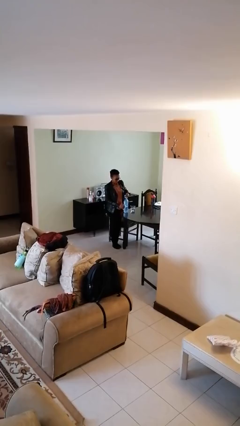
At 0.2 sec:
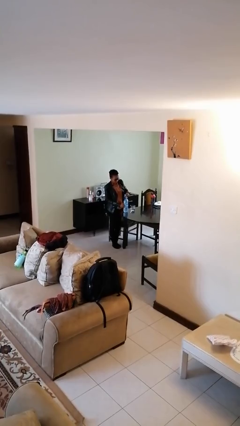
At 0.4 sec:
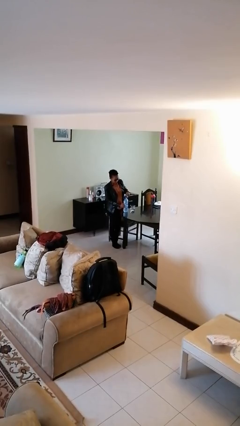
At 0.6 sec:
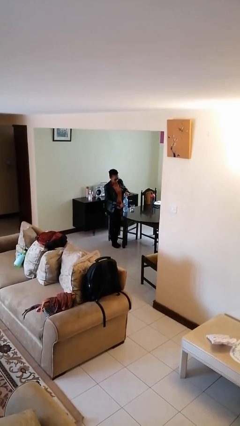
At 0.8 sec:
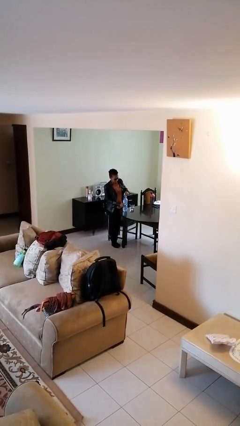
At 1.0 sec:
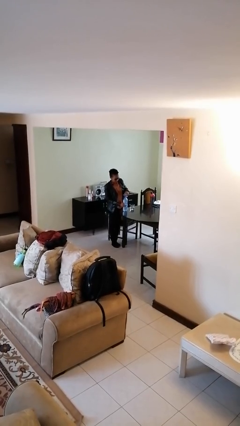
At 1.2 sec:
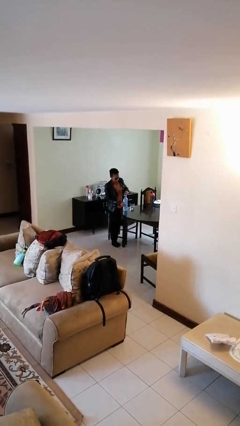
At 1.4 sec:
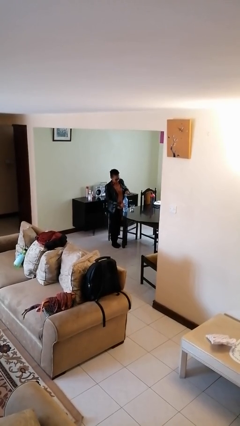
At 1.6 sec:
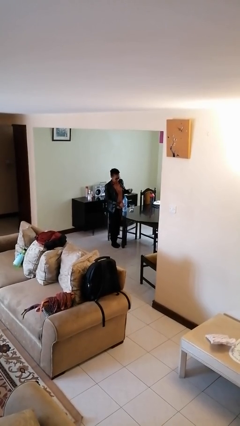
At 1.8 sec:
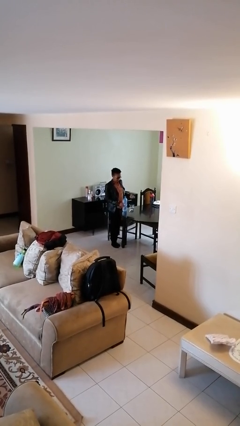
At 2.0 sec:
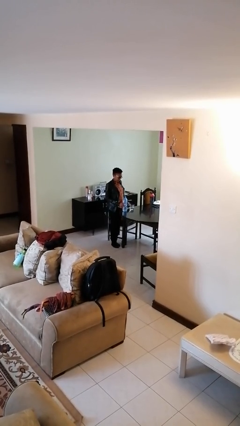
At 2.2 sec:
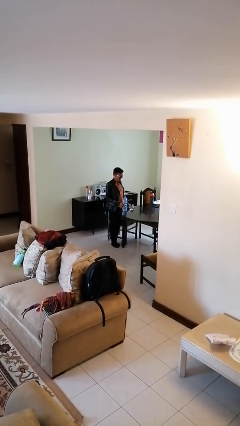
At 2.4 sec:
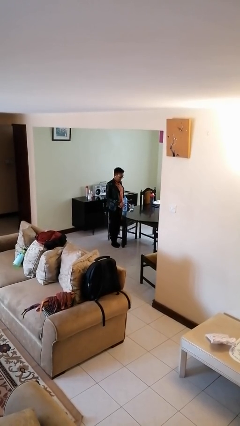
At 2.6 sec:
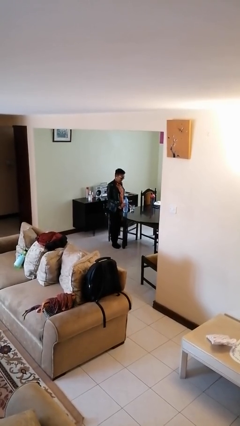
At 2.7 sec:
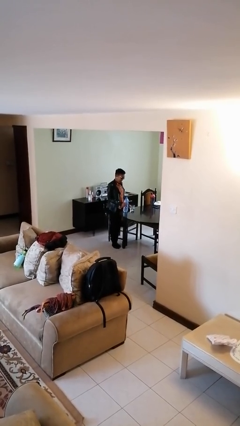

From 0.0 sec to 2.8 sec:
person unscrews lid from bottle

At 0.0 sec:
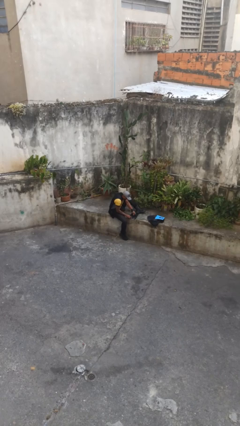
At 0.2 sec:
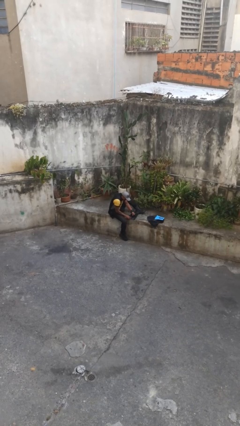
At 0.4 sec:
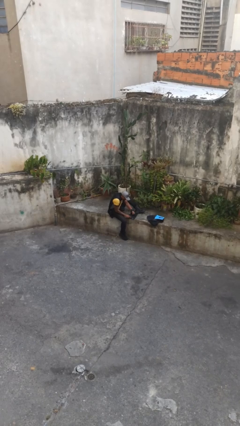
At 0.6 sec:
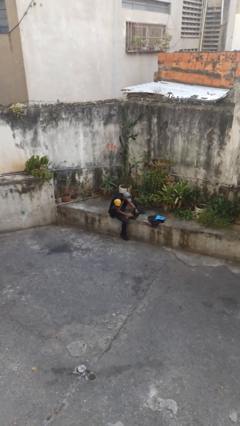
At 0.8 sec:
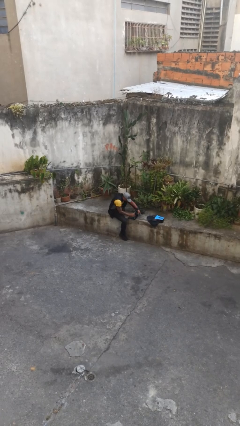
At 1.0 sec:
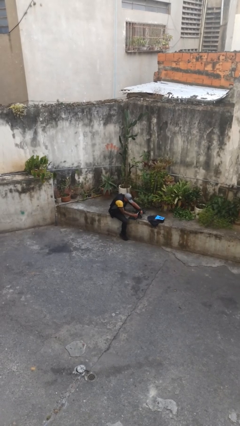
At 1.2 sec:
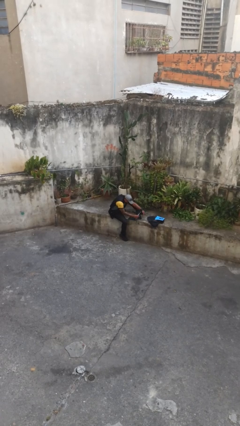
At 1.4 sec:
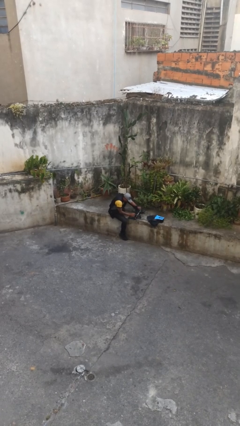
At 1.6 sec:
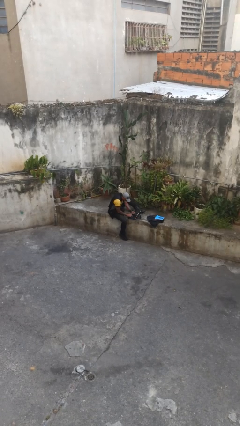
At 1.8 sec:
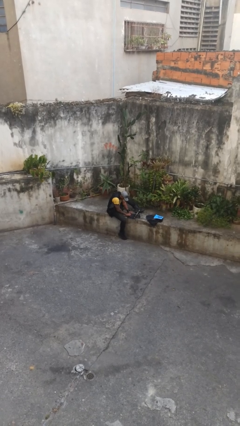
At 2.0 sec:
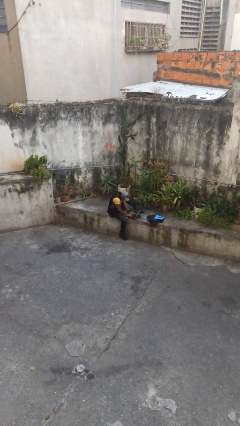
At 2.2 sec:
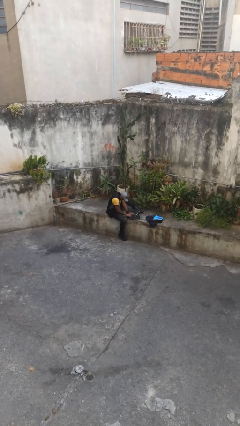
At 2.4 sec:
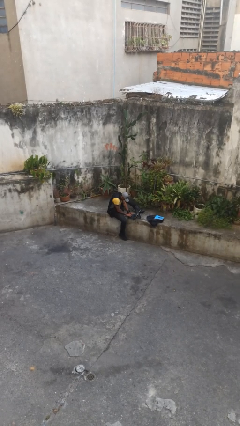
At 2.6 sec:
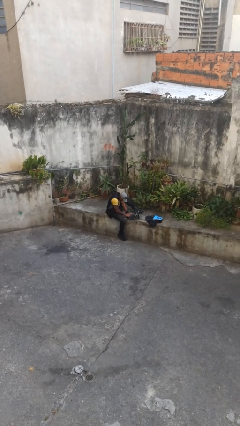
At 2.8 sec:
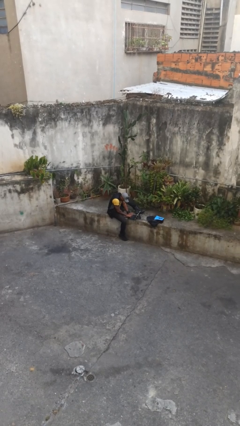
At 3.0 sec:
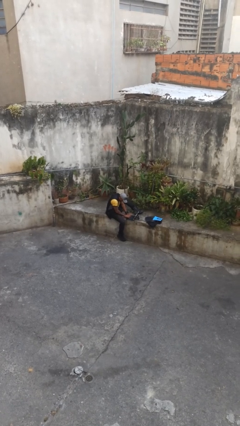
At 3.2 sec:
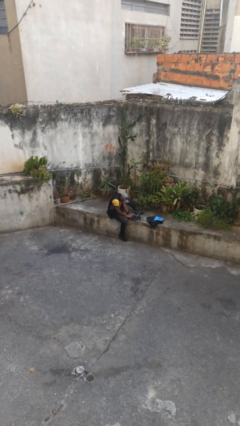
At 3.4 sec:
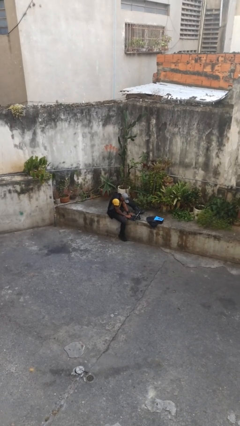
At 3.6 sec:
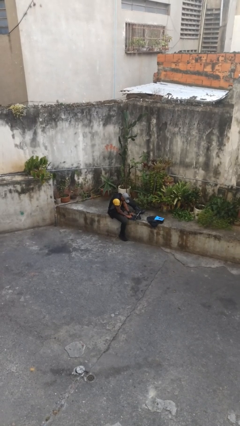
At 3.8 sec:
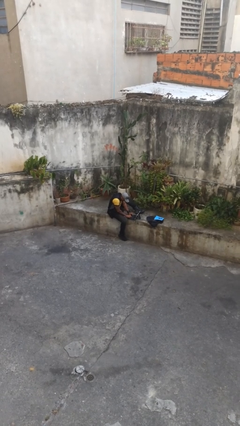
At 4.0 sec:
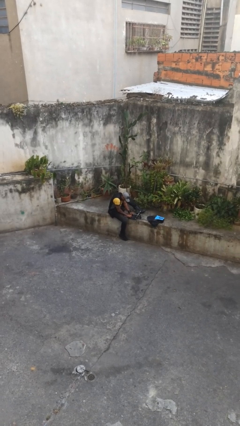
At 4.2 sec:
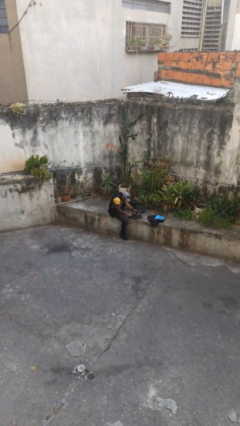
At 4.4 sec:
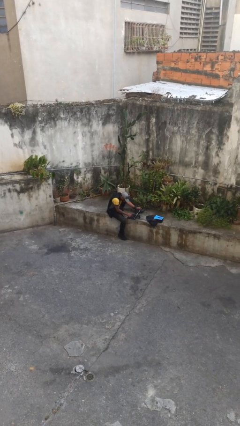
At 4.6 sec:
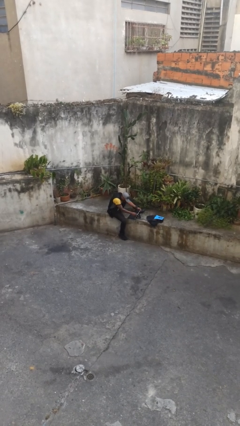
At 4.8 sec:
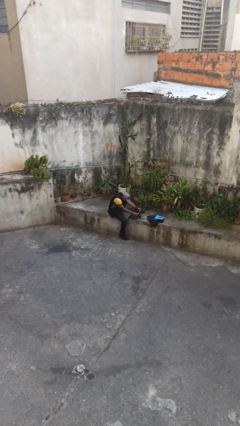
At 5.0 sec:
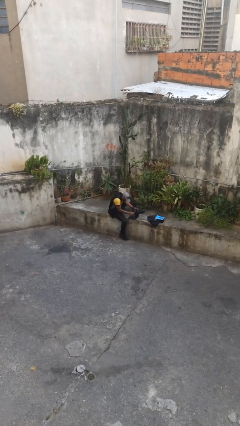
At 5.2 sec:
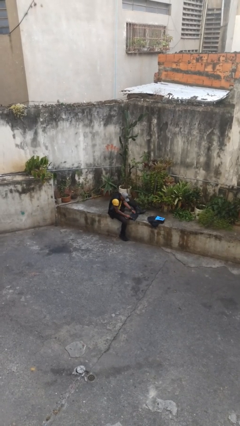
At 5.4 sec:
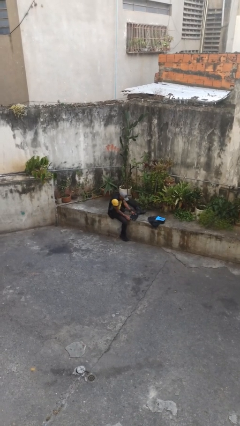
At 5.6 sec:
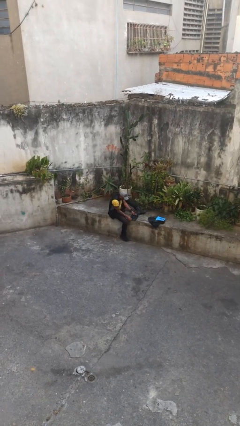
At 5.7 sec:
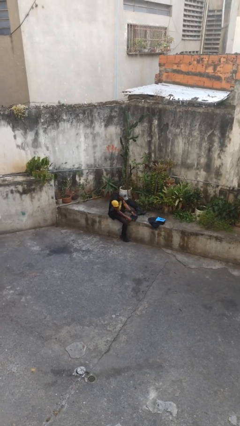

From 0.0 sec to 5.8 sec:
person interacts with laptop

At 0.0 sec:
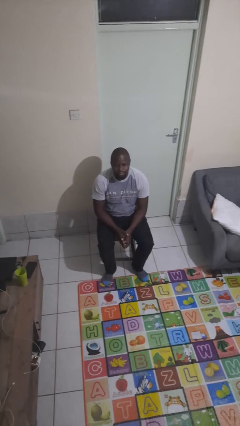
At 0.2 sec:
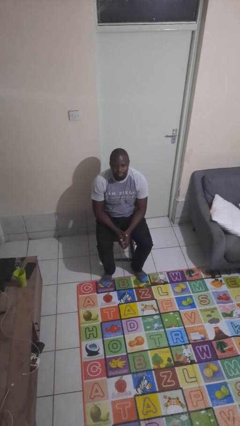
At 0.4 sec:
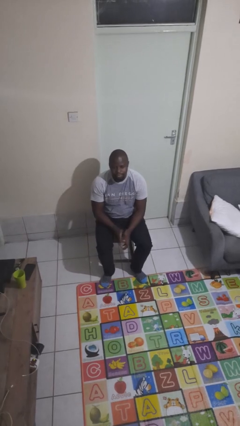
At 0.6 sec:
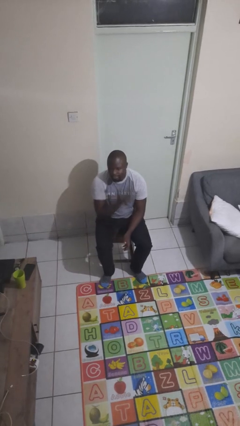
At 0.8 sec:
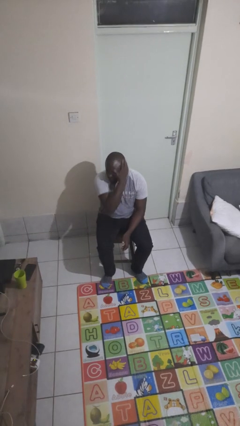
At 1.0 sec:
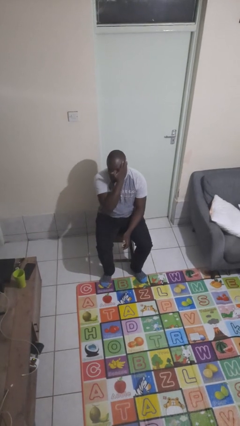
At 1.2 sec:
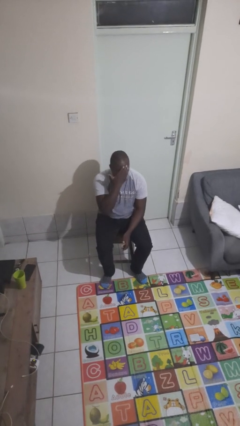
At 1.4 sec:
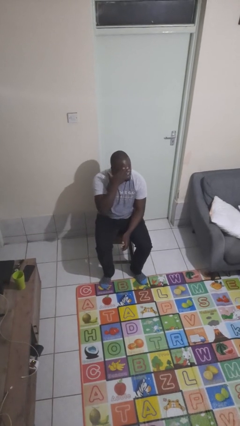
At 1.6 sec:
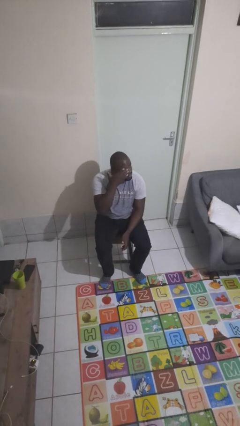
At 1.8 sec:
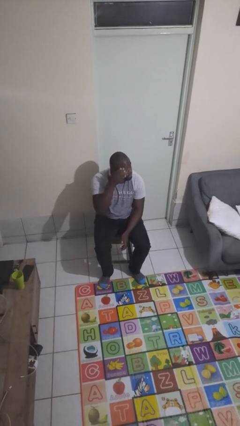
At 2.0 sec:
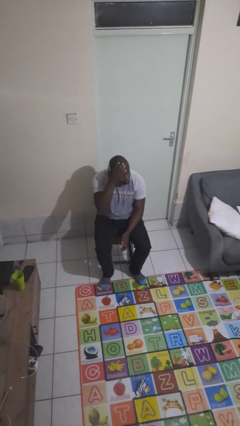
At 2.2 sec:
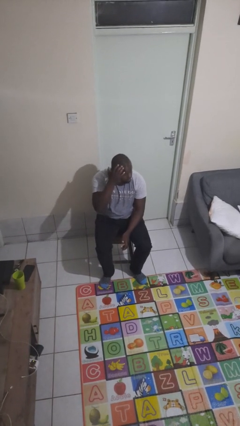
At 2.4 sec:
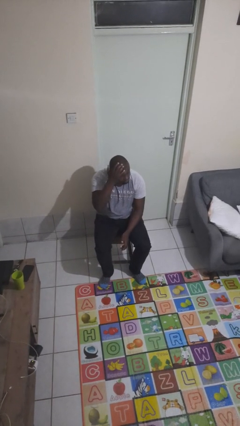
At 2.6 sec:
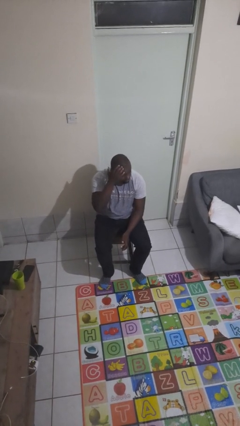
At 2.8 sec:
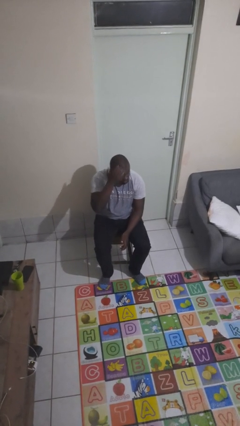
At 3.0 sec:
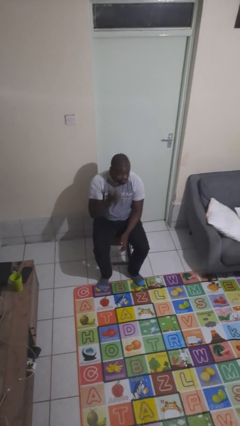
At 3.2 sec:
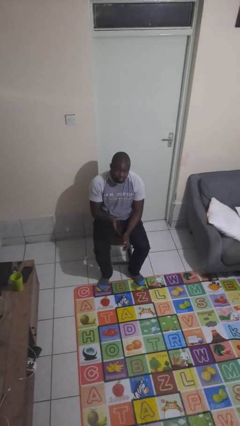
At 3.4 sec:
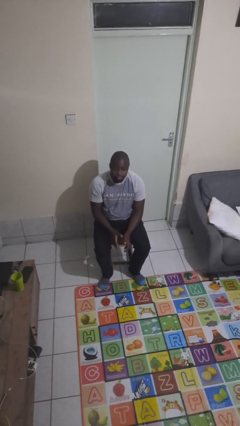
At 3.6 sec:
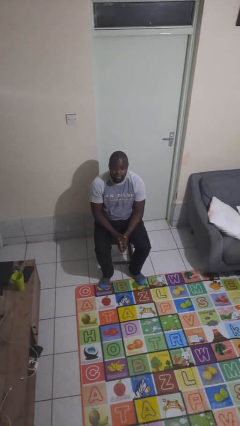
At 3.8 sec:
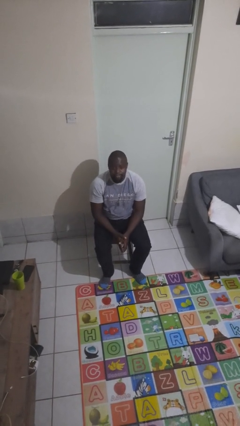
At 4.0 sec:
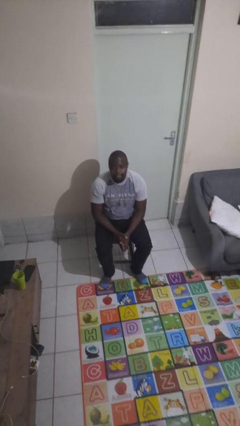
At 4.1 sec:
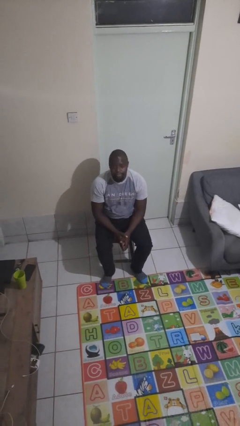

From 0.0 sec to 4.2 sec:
person scratches face

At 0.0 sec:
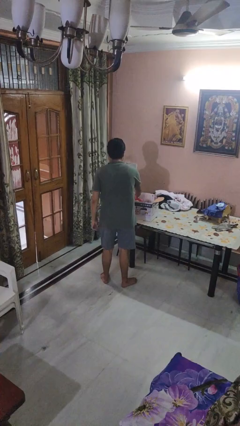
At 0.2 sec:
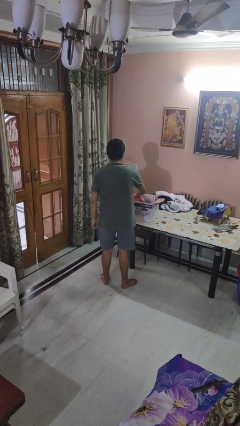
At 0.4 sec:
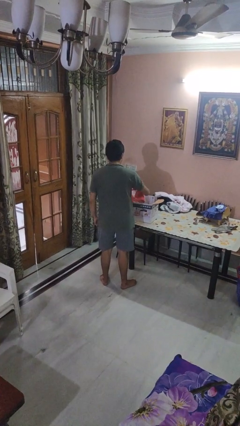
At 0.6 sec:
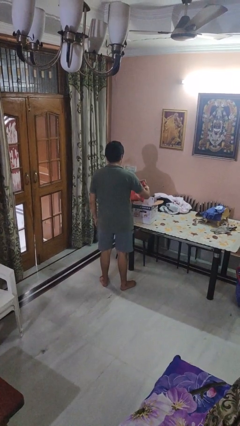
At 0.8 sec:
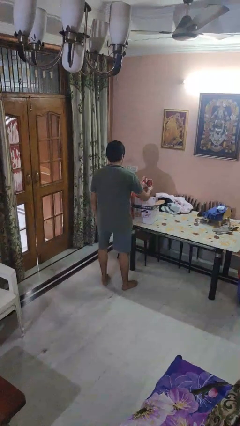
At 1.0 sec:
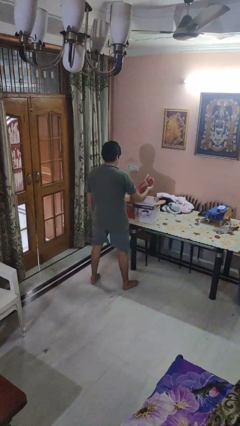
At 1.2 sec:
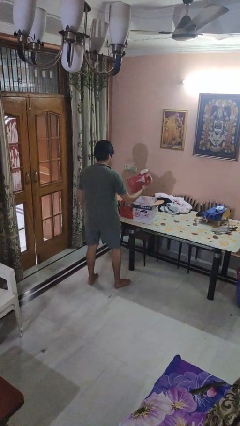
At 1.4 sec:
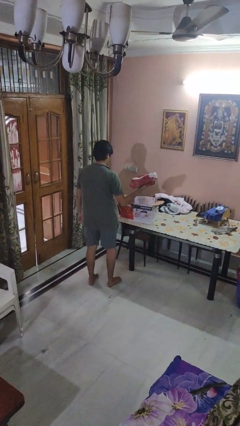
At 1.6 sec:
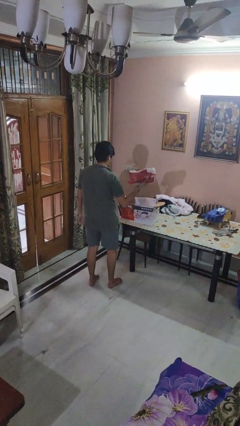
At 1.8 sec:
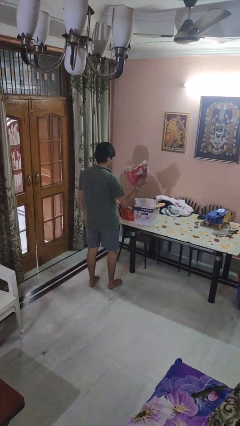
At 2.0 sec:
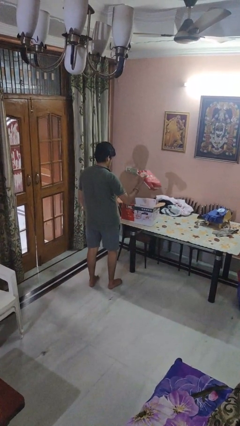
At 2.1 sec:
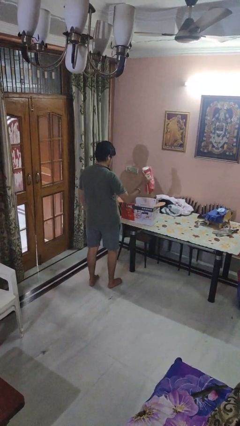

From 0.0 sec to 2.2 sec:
person takes object from box

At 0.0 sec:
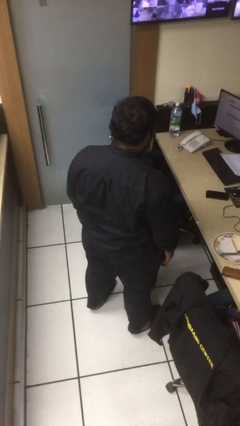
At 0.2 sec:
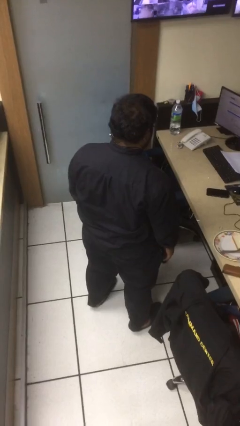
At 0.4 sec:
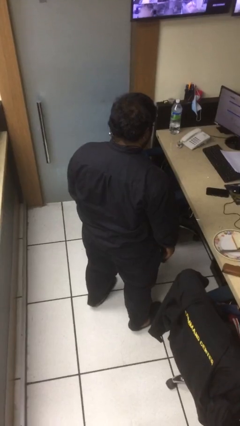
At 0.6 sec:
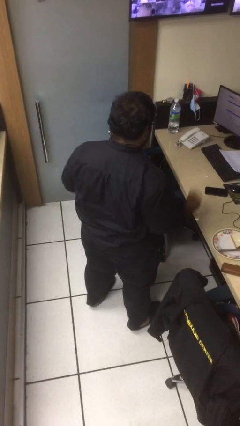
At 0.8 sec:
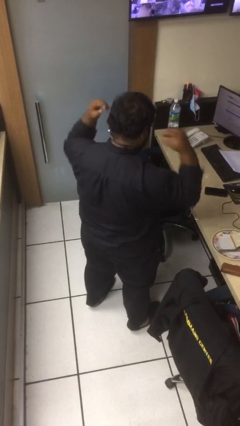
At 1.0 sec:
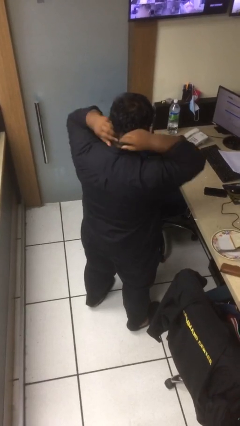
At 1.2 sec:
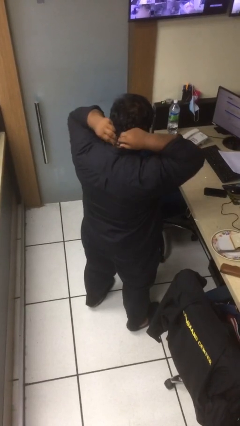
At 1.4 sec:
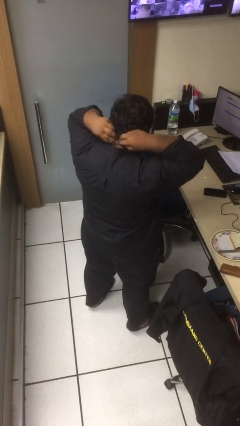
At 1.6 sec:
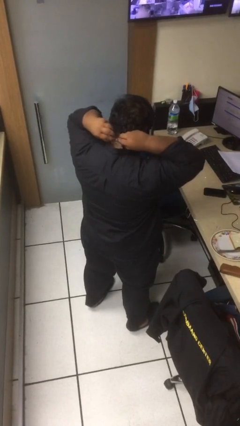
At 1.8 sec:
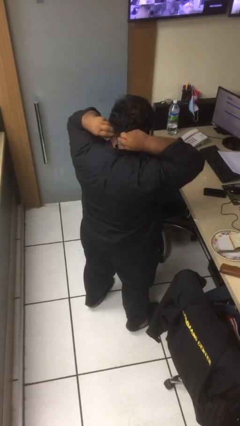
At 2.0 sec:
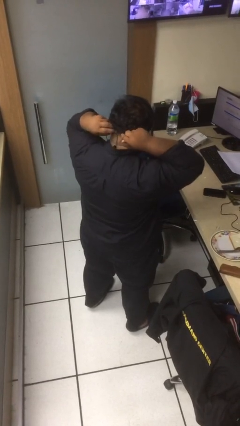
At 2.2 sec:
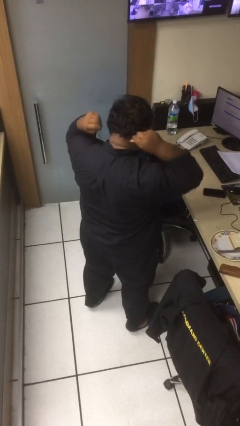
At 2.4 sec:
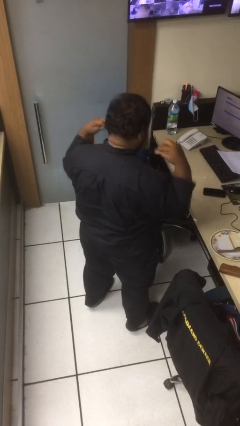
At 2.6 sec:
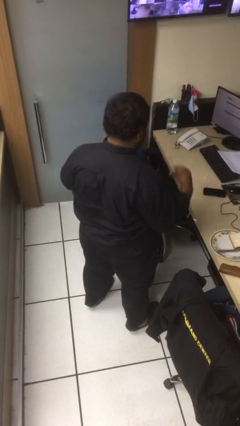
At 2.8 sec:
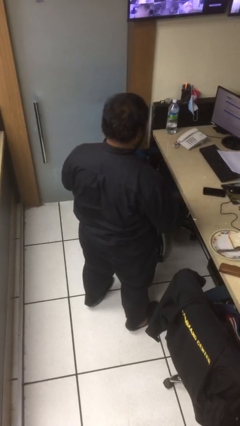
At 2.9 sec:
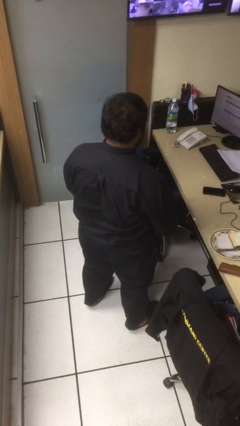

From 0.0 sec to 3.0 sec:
person takes off necklace
